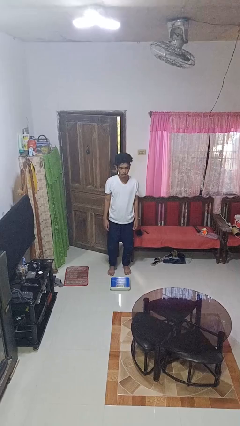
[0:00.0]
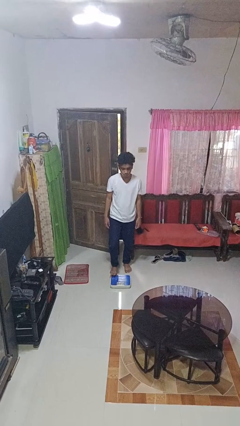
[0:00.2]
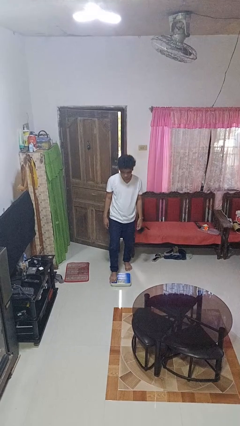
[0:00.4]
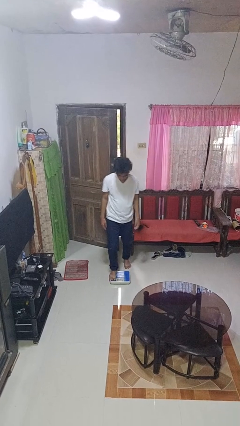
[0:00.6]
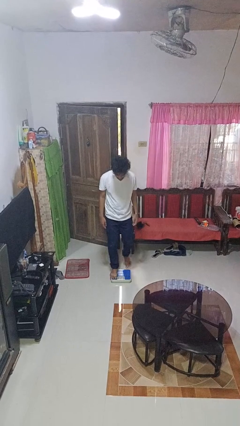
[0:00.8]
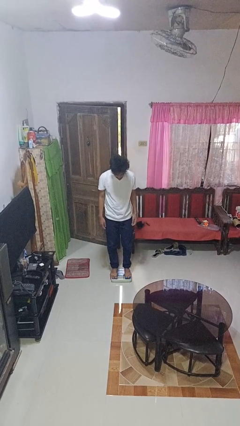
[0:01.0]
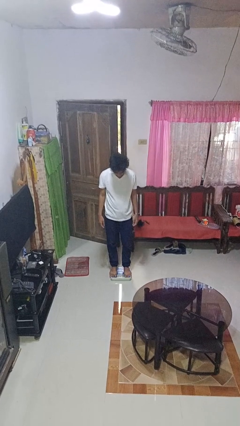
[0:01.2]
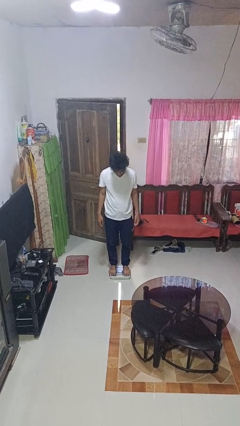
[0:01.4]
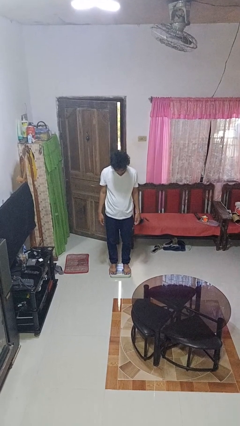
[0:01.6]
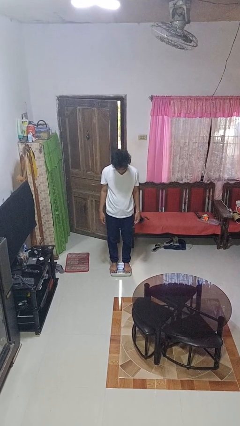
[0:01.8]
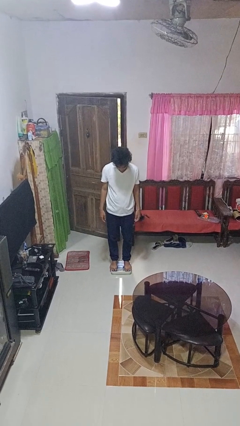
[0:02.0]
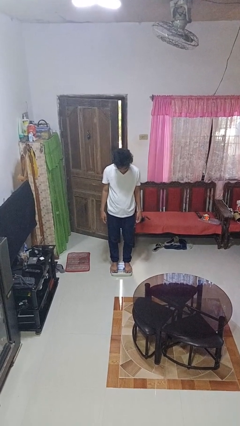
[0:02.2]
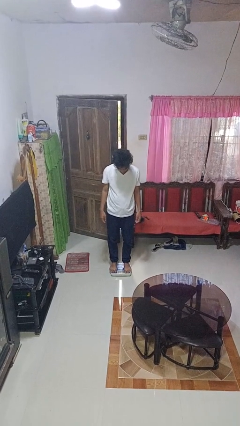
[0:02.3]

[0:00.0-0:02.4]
person uses bodyweight scale

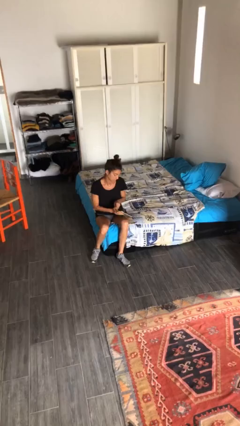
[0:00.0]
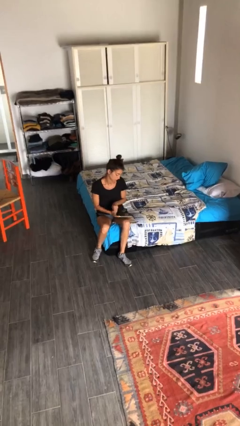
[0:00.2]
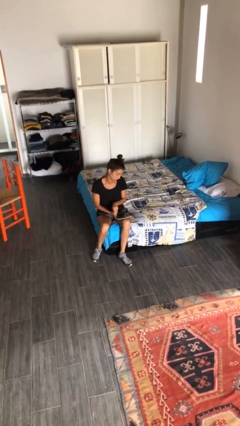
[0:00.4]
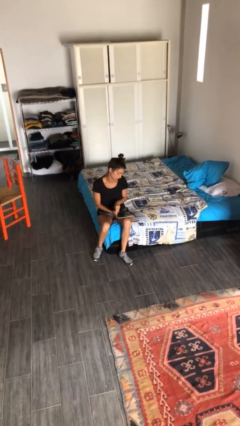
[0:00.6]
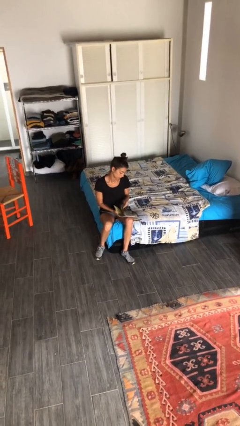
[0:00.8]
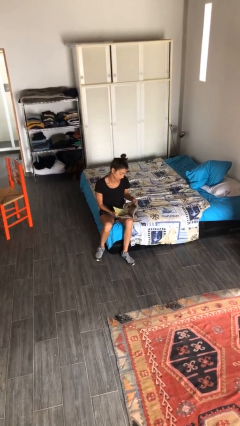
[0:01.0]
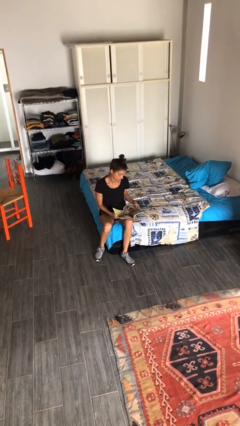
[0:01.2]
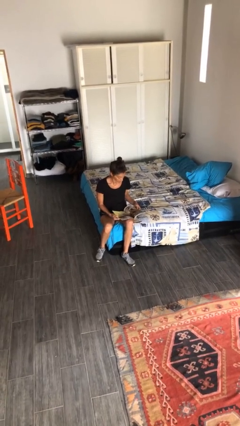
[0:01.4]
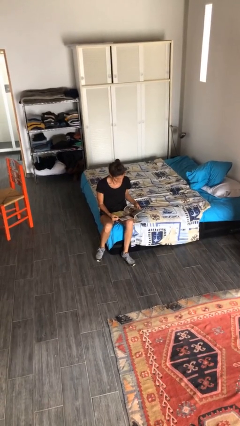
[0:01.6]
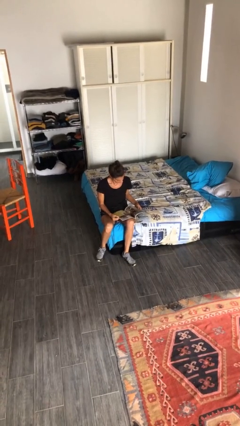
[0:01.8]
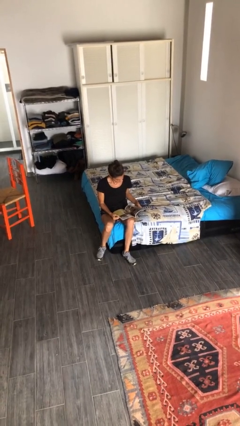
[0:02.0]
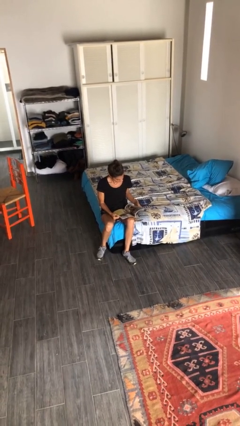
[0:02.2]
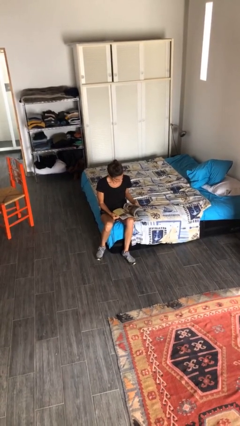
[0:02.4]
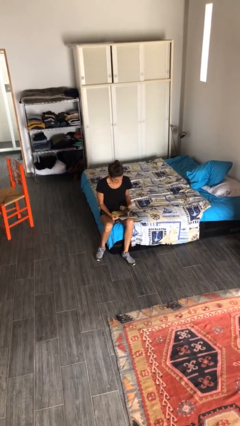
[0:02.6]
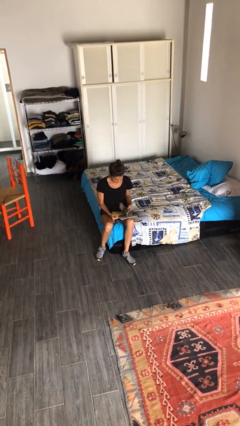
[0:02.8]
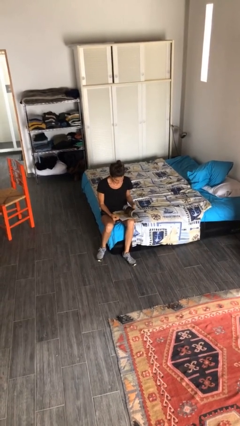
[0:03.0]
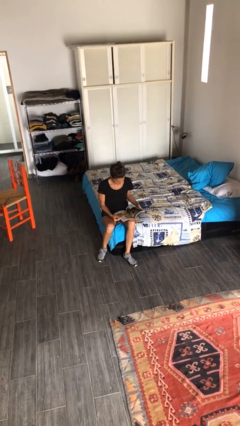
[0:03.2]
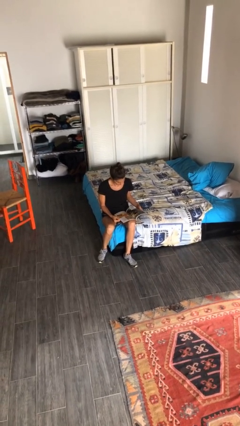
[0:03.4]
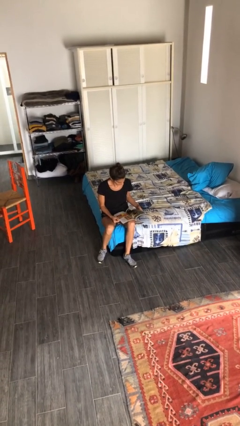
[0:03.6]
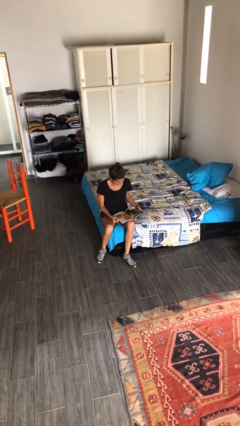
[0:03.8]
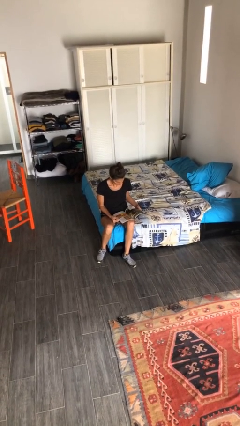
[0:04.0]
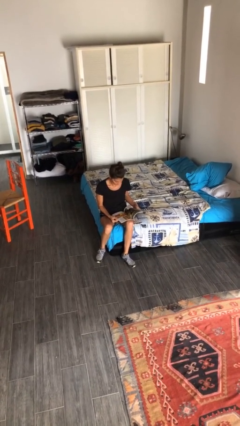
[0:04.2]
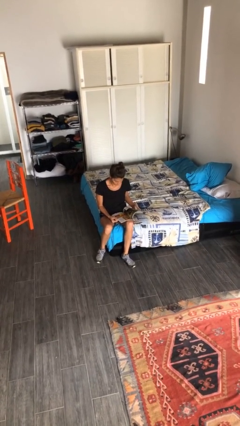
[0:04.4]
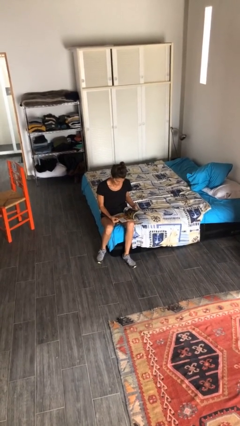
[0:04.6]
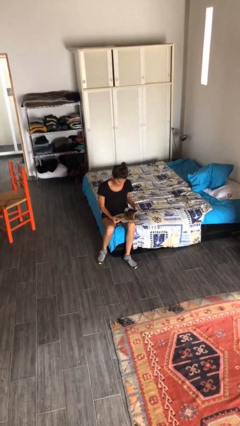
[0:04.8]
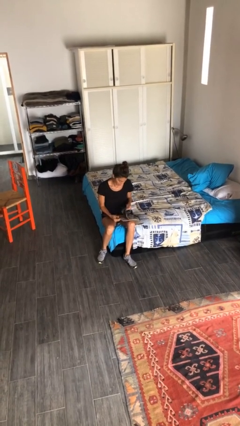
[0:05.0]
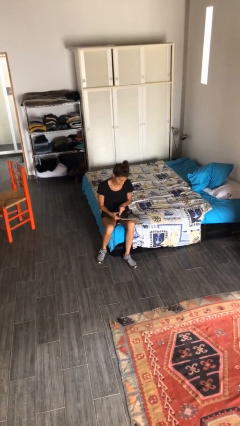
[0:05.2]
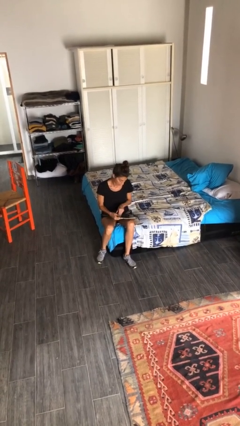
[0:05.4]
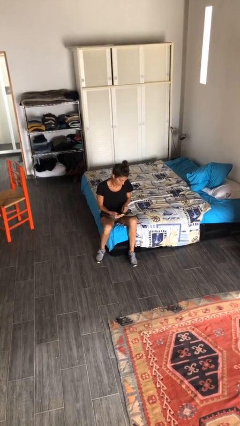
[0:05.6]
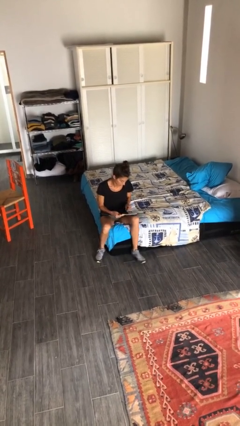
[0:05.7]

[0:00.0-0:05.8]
person reads magazine

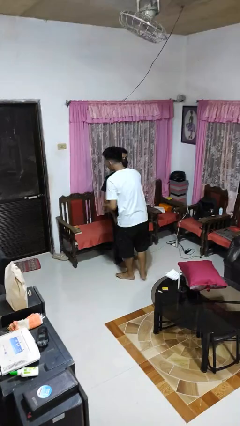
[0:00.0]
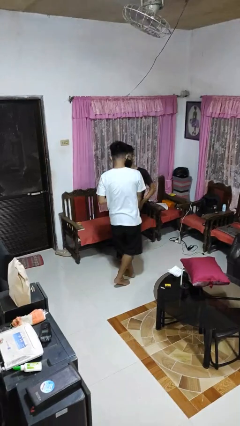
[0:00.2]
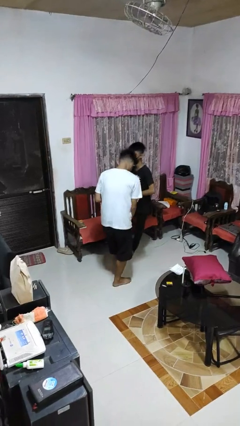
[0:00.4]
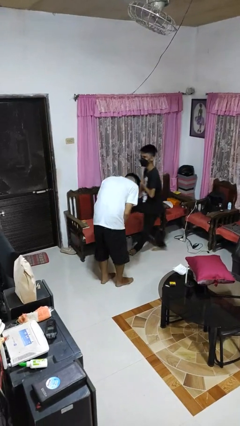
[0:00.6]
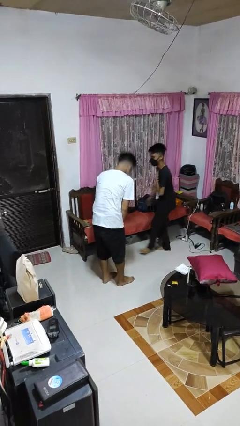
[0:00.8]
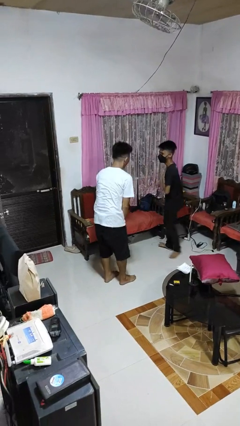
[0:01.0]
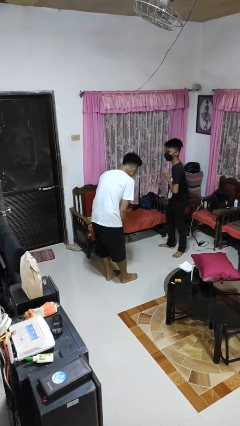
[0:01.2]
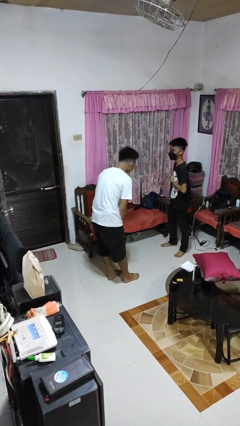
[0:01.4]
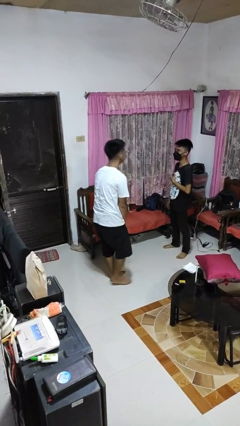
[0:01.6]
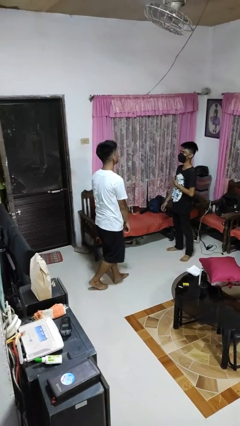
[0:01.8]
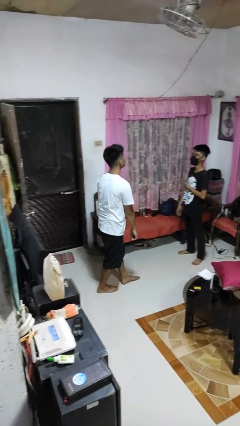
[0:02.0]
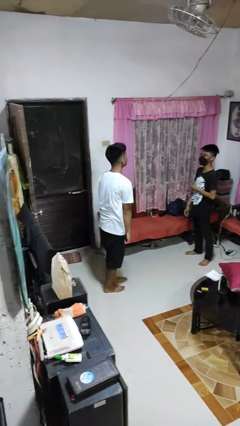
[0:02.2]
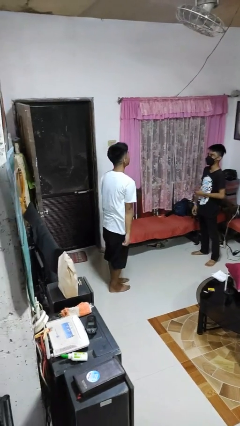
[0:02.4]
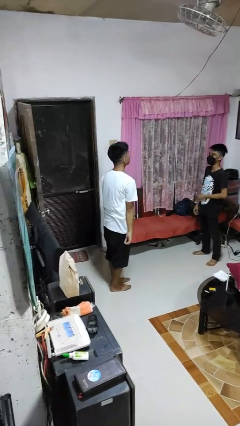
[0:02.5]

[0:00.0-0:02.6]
person bumps into person

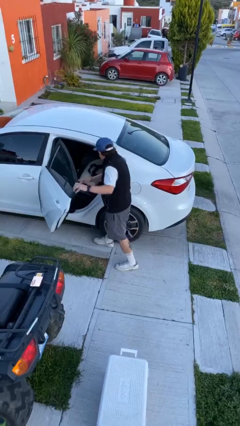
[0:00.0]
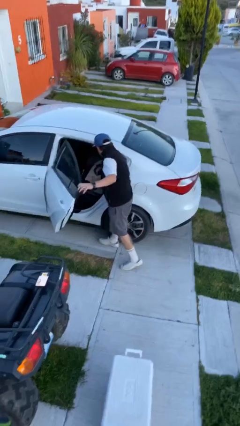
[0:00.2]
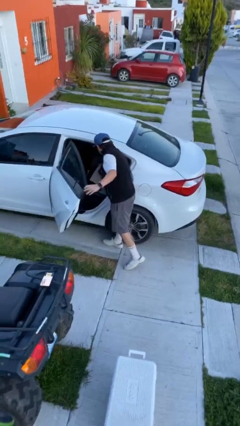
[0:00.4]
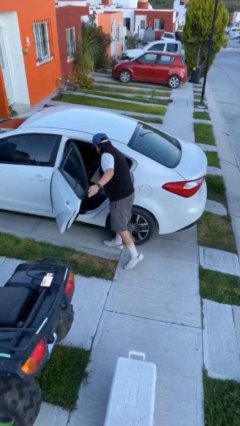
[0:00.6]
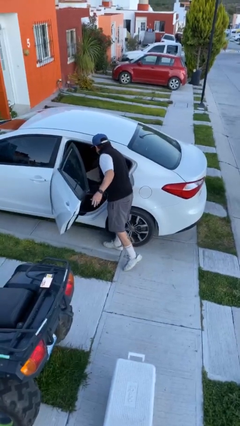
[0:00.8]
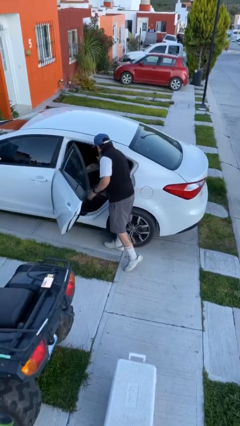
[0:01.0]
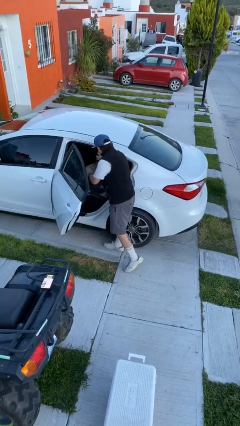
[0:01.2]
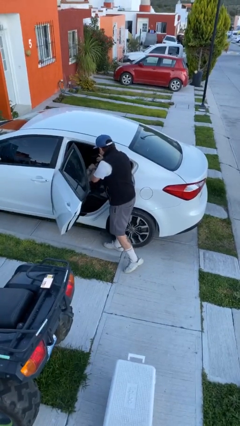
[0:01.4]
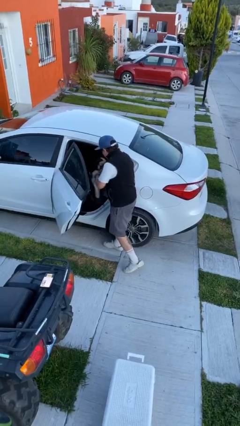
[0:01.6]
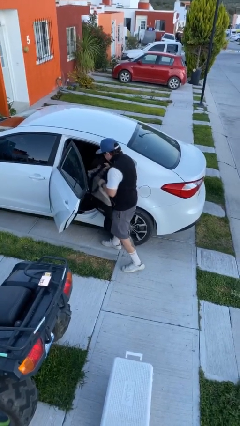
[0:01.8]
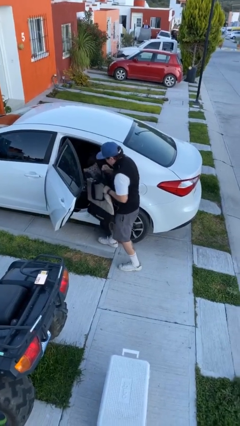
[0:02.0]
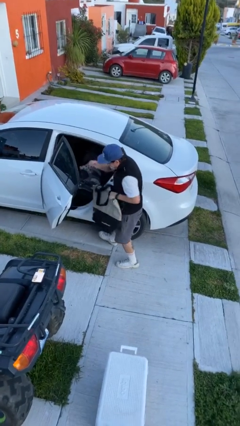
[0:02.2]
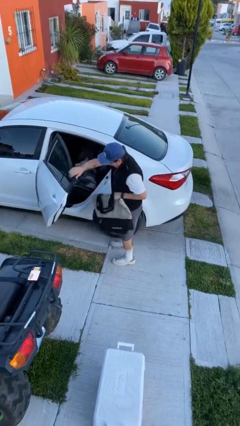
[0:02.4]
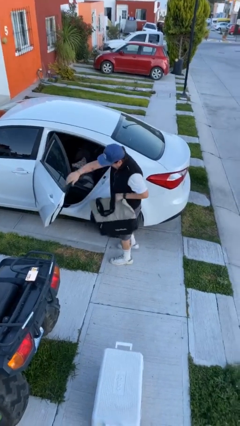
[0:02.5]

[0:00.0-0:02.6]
person unloads car

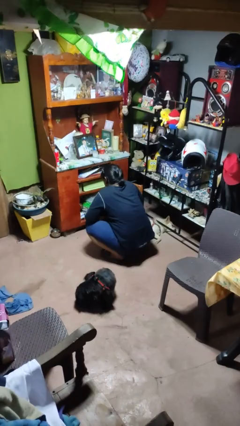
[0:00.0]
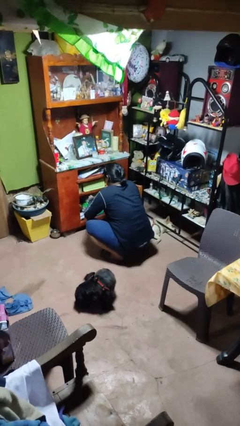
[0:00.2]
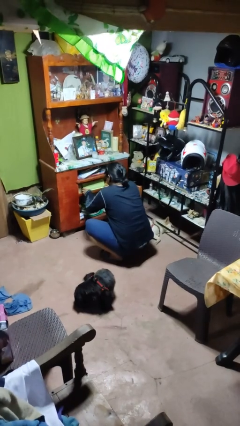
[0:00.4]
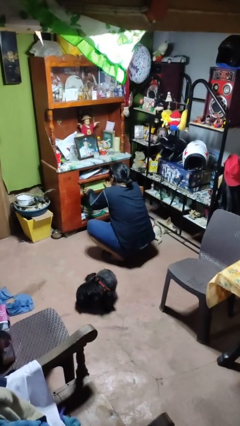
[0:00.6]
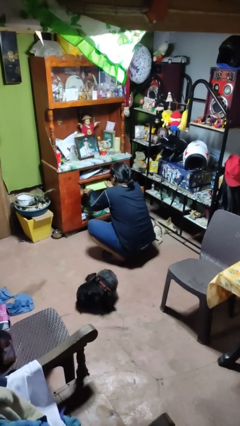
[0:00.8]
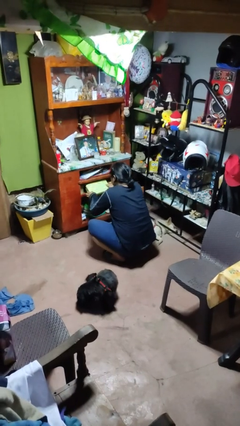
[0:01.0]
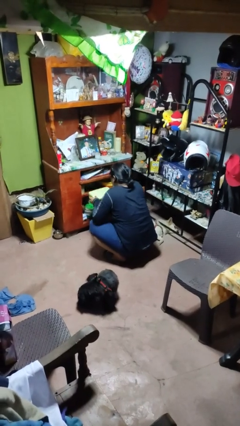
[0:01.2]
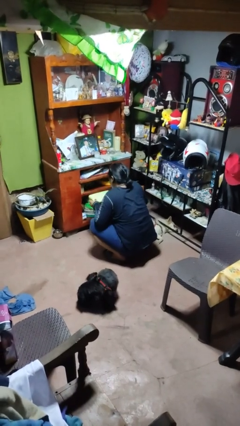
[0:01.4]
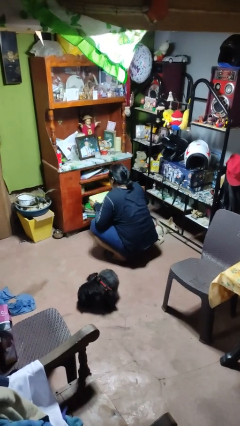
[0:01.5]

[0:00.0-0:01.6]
person picks up object from cabinet

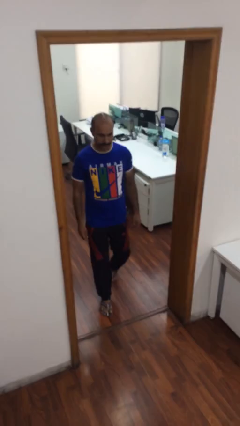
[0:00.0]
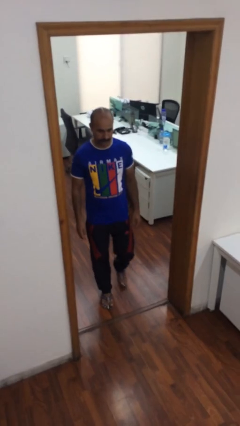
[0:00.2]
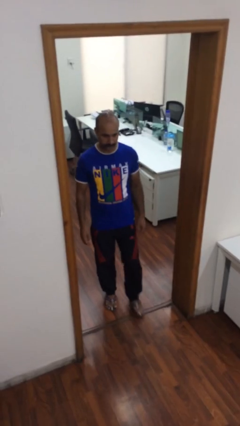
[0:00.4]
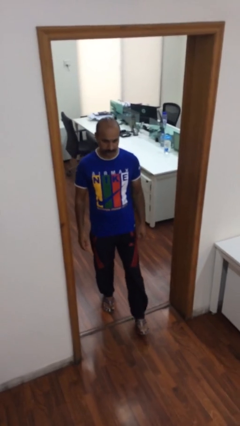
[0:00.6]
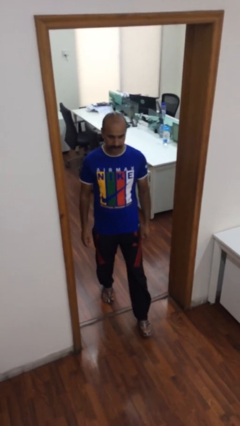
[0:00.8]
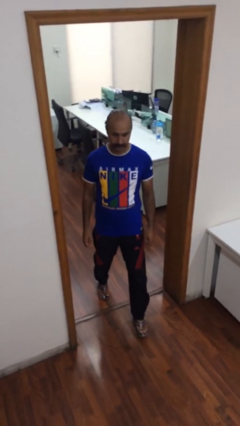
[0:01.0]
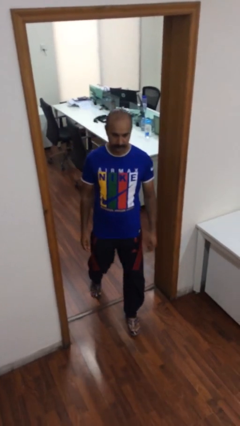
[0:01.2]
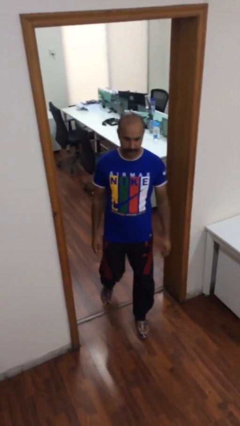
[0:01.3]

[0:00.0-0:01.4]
person enters scene through structure

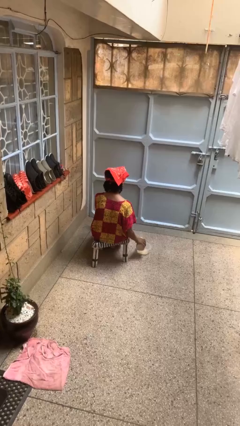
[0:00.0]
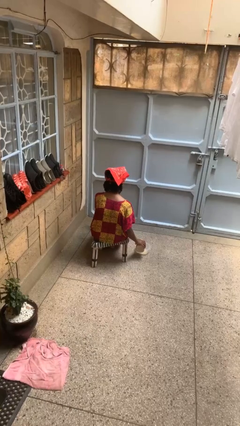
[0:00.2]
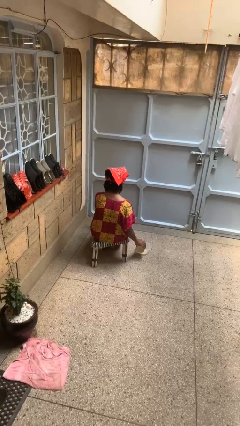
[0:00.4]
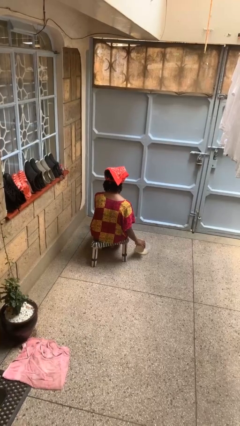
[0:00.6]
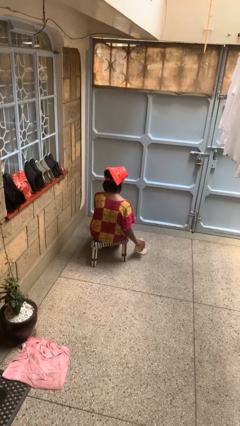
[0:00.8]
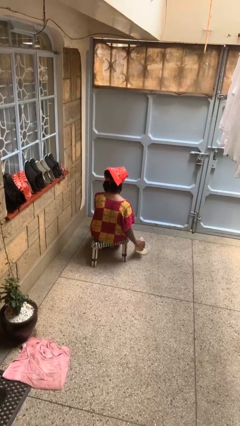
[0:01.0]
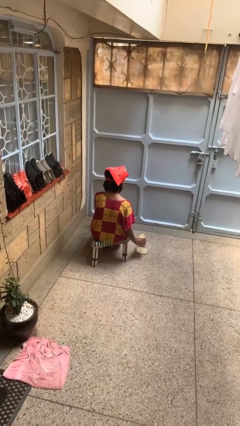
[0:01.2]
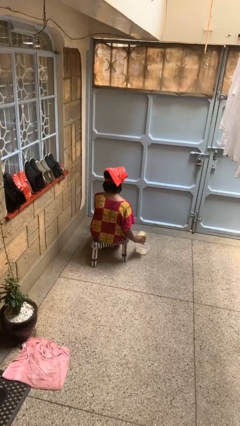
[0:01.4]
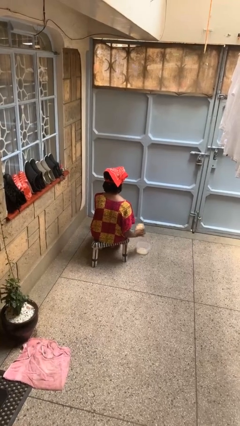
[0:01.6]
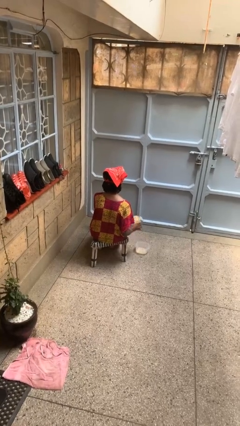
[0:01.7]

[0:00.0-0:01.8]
person pours into bowl
